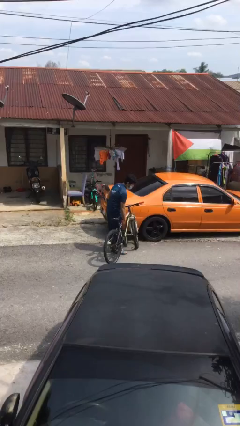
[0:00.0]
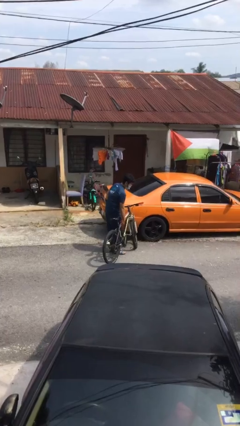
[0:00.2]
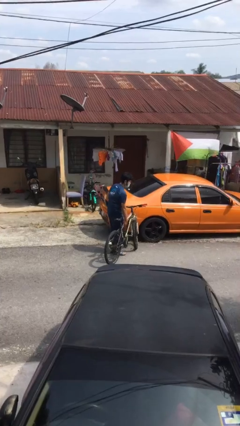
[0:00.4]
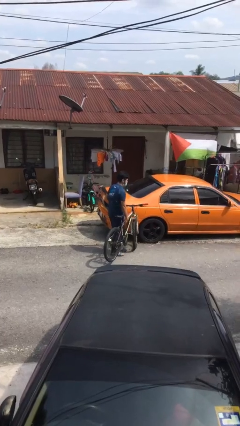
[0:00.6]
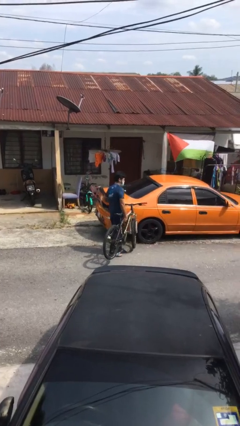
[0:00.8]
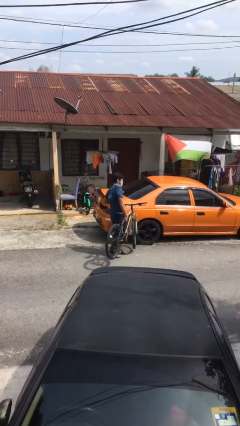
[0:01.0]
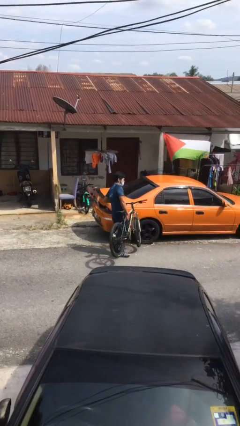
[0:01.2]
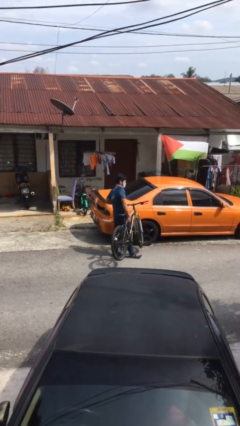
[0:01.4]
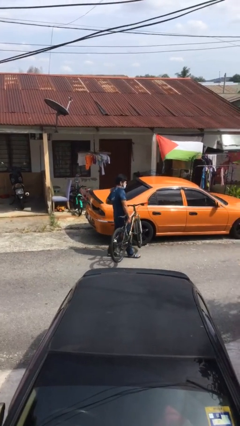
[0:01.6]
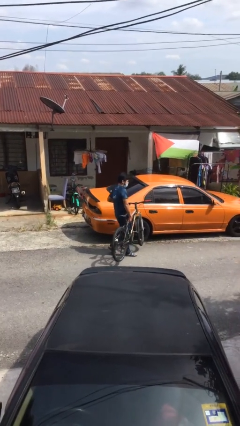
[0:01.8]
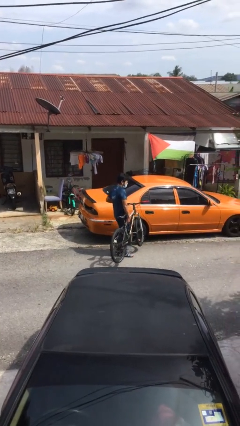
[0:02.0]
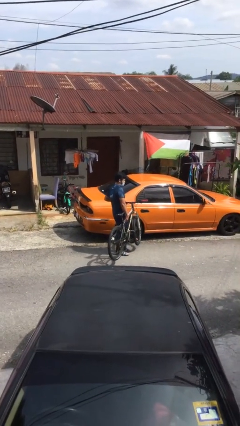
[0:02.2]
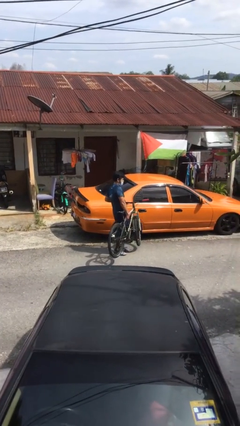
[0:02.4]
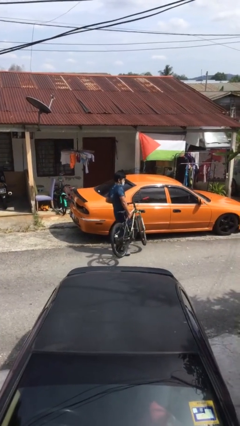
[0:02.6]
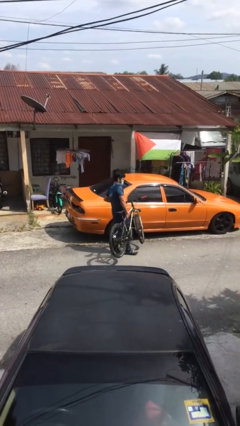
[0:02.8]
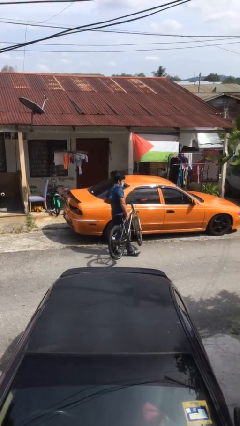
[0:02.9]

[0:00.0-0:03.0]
person carries bicycle

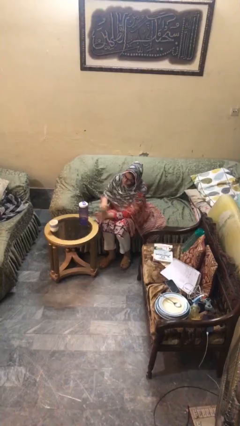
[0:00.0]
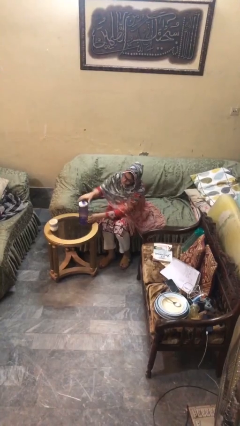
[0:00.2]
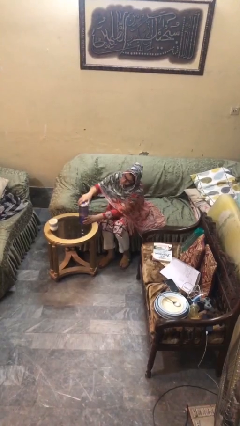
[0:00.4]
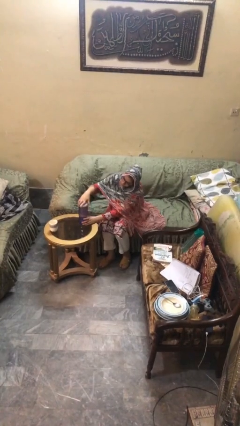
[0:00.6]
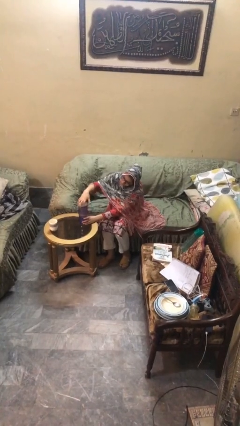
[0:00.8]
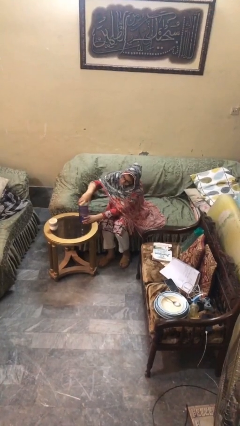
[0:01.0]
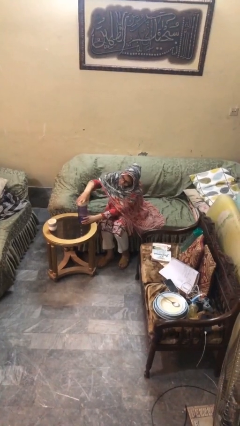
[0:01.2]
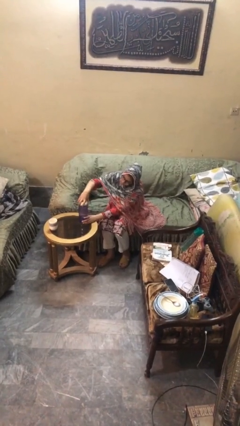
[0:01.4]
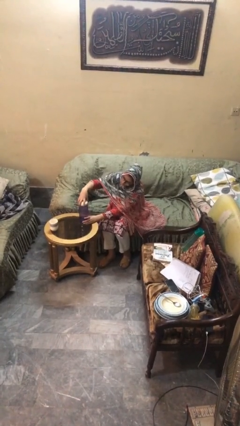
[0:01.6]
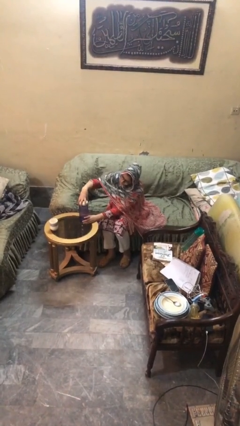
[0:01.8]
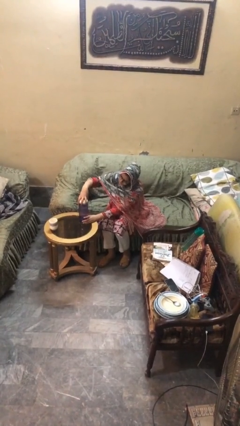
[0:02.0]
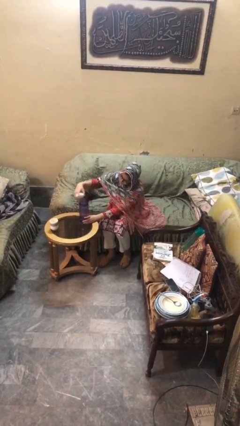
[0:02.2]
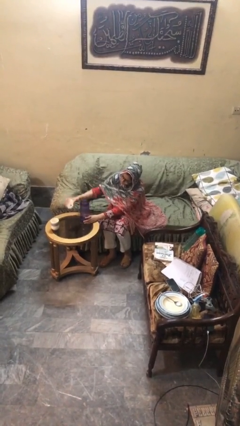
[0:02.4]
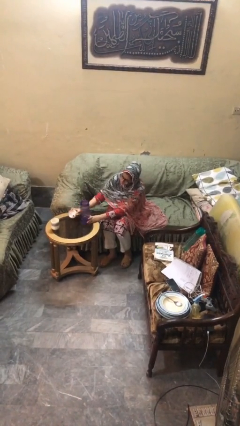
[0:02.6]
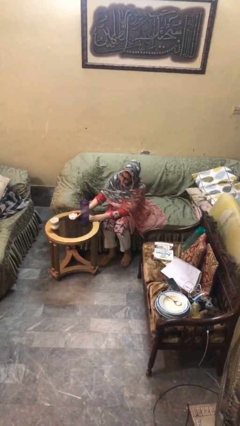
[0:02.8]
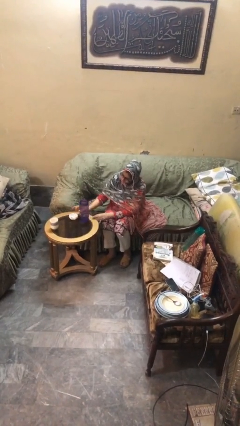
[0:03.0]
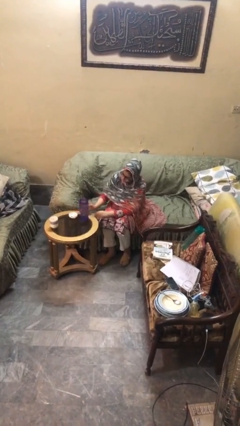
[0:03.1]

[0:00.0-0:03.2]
person unscrews lid from bottle

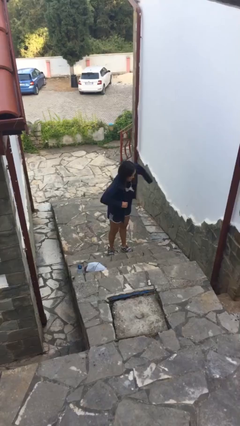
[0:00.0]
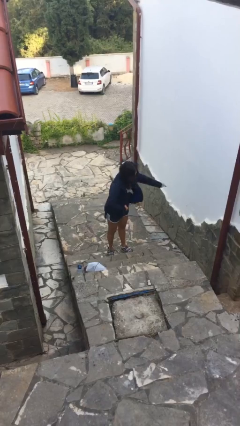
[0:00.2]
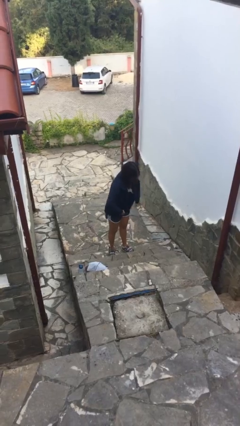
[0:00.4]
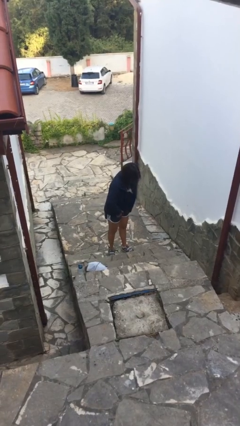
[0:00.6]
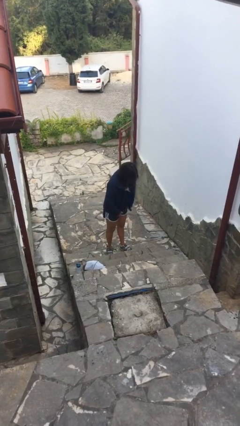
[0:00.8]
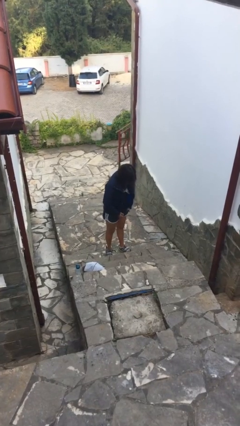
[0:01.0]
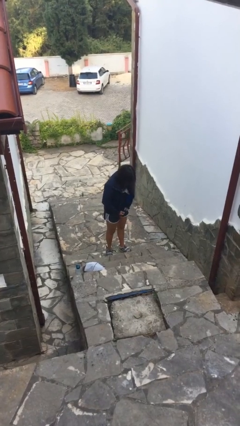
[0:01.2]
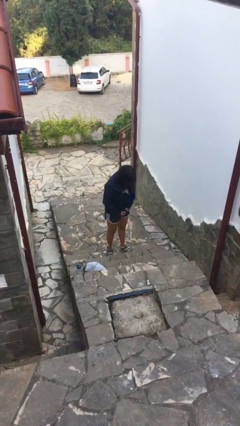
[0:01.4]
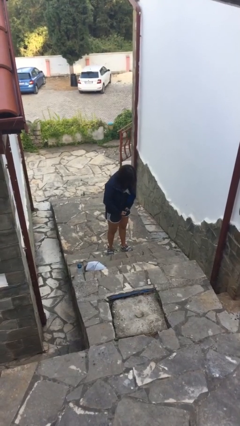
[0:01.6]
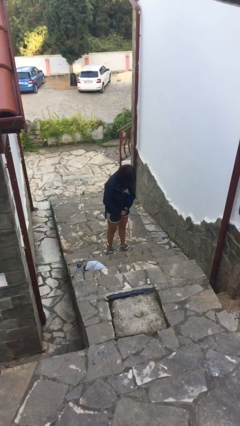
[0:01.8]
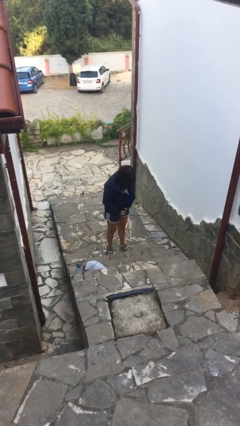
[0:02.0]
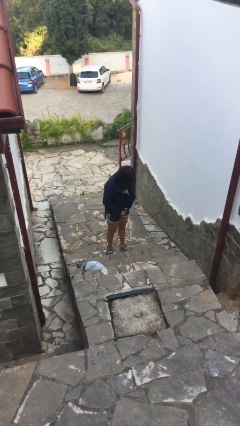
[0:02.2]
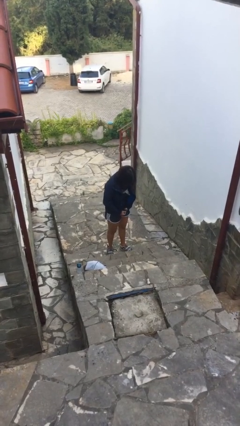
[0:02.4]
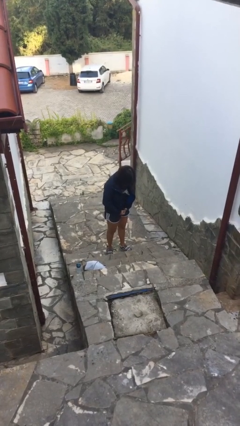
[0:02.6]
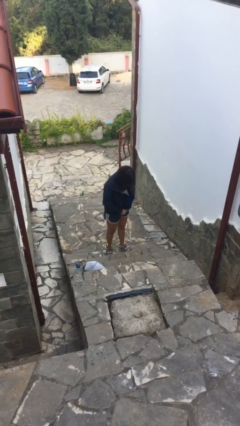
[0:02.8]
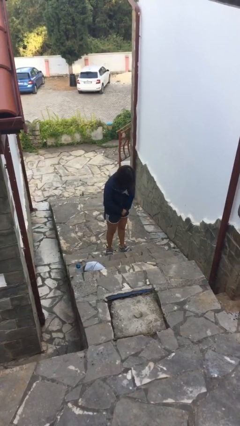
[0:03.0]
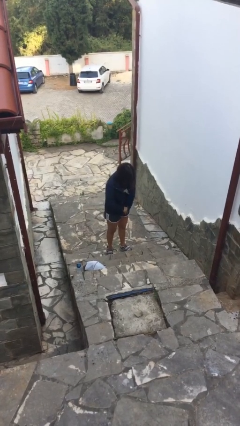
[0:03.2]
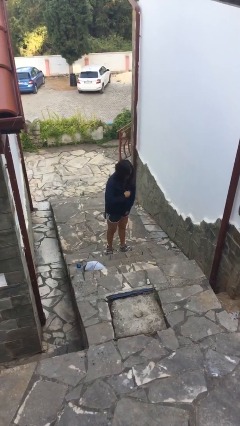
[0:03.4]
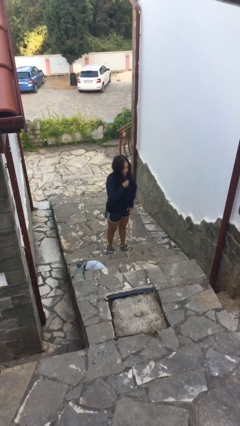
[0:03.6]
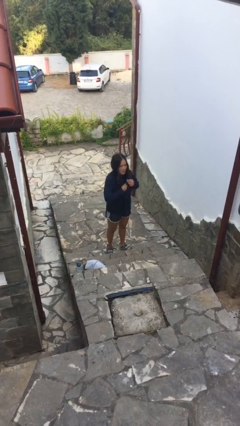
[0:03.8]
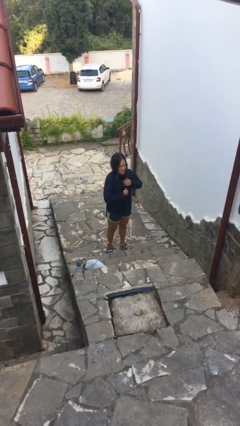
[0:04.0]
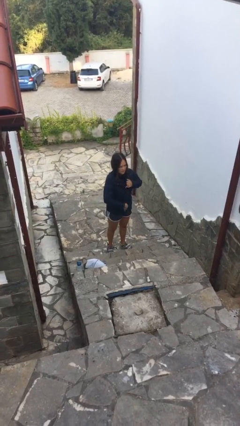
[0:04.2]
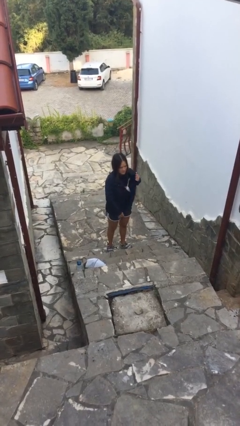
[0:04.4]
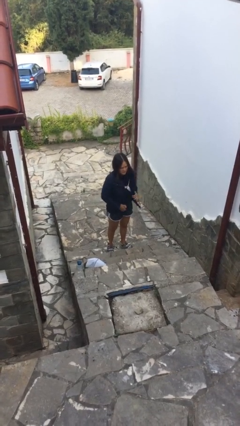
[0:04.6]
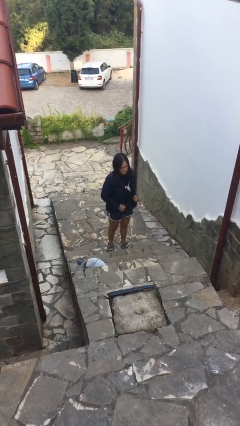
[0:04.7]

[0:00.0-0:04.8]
person zips up jacket

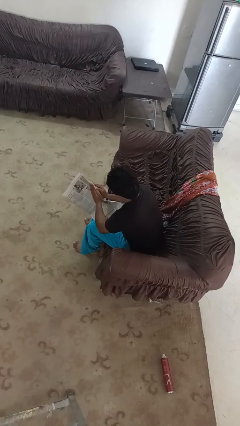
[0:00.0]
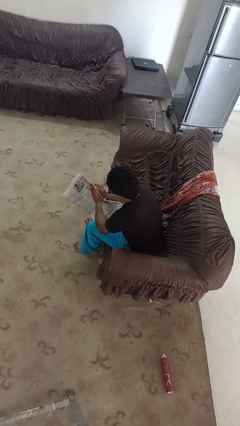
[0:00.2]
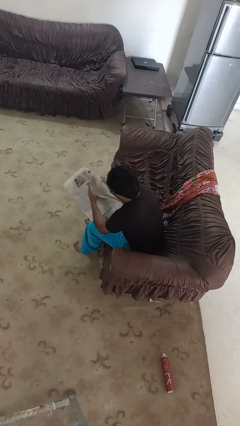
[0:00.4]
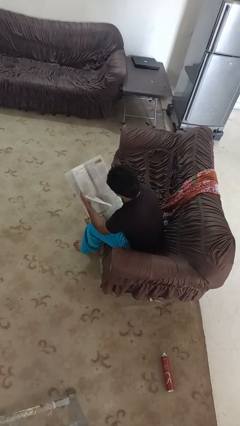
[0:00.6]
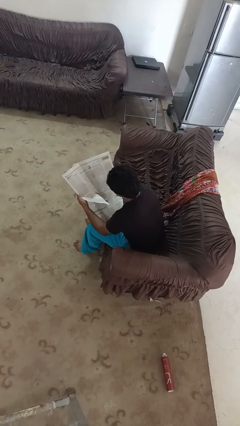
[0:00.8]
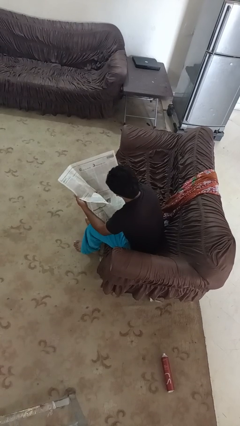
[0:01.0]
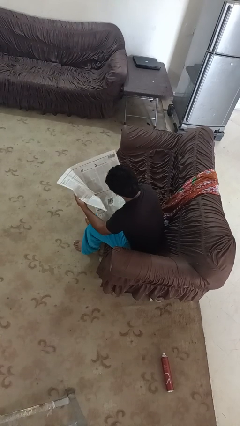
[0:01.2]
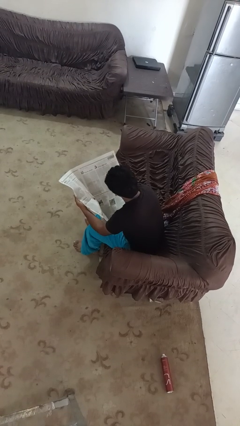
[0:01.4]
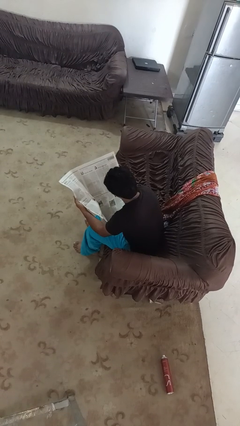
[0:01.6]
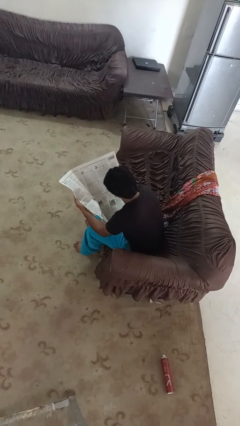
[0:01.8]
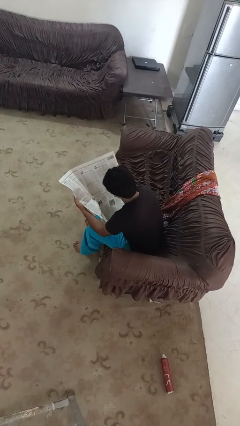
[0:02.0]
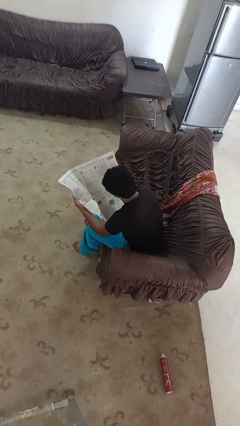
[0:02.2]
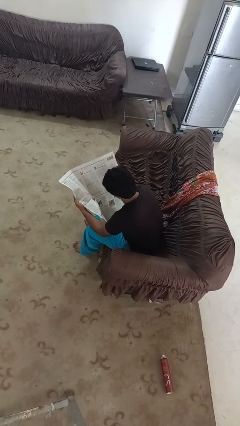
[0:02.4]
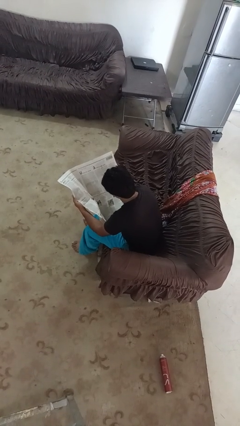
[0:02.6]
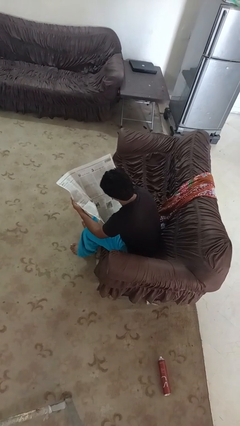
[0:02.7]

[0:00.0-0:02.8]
person reads newspaper

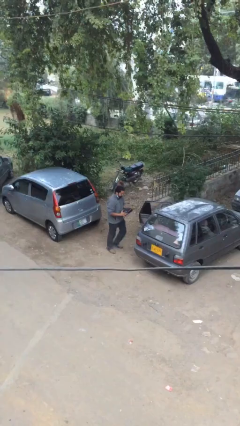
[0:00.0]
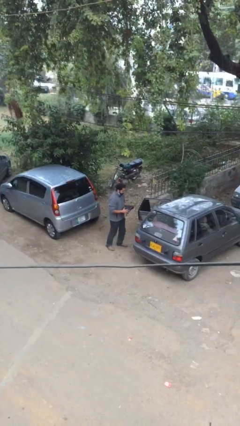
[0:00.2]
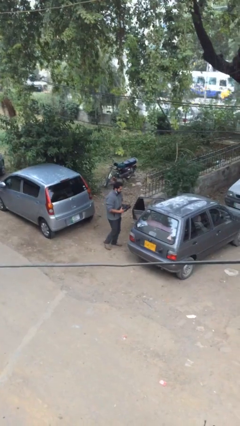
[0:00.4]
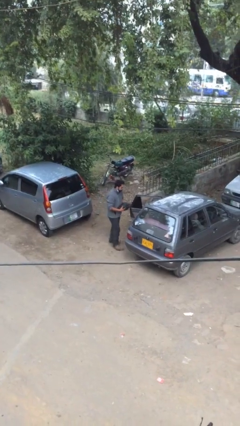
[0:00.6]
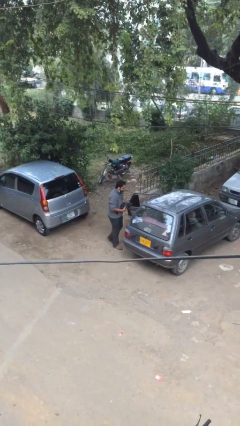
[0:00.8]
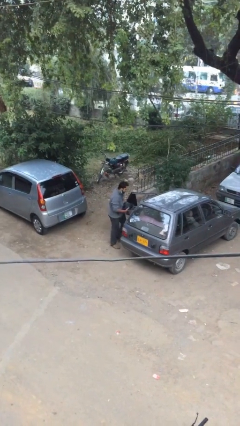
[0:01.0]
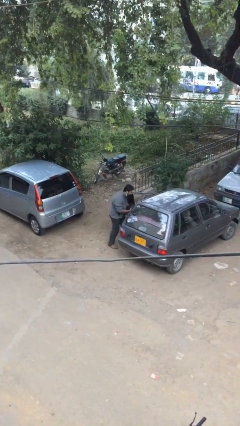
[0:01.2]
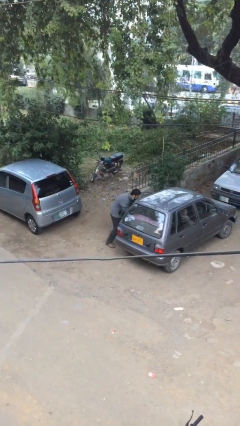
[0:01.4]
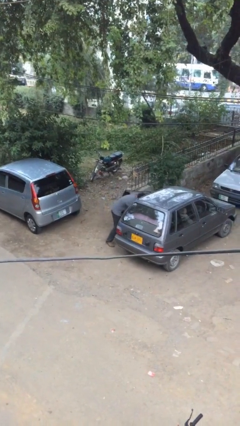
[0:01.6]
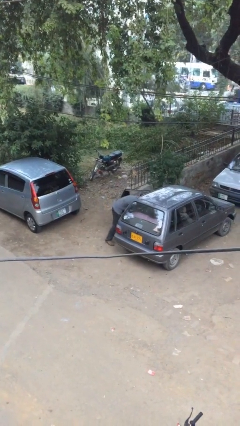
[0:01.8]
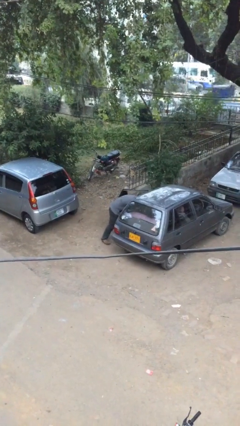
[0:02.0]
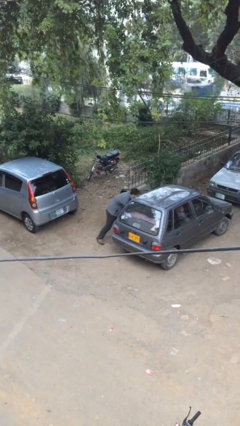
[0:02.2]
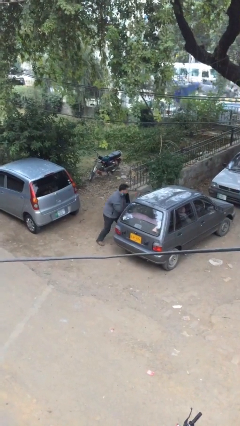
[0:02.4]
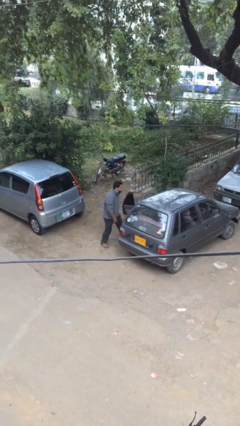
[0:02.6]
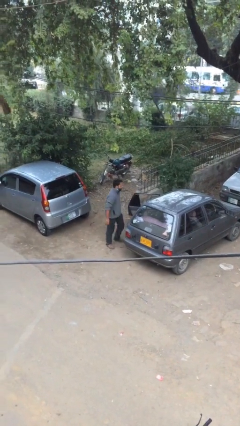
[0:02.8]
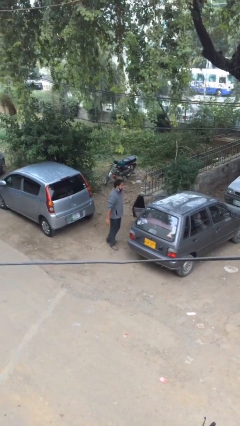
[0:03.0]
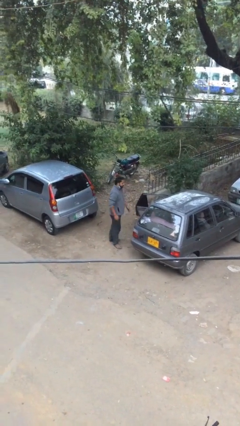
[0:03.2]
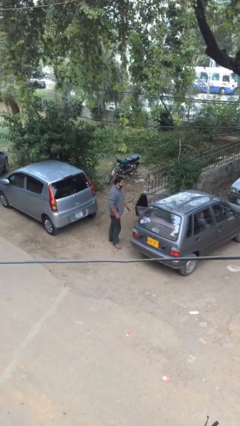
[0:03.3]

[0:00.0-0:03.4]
person loads car

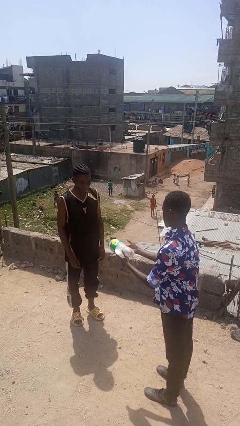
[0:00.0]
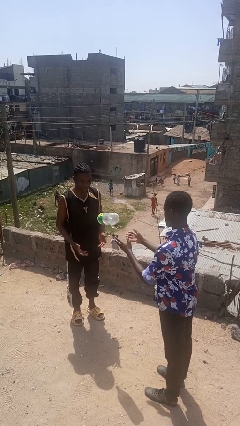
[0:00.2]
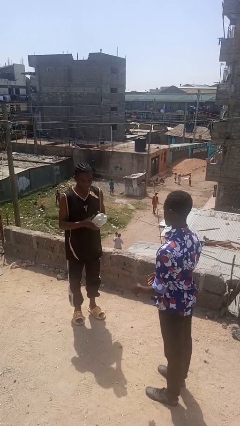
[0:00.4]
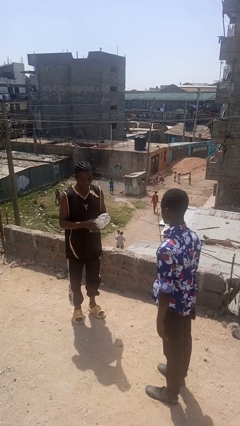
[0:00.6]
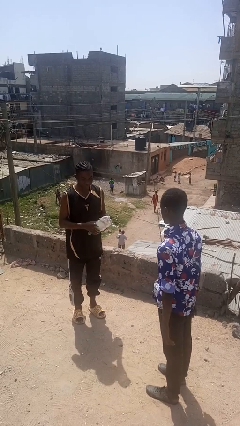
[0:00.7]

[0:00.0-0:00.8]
person throws object to person
